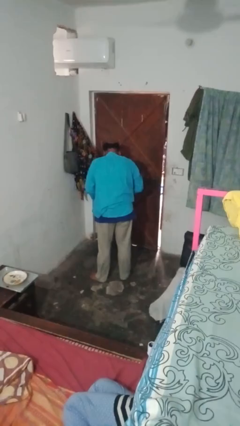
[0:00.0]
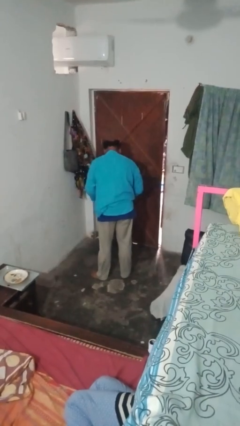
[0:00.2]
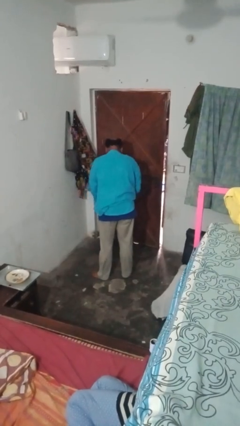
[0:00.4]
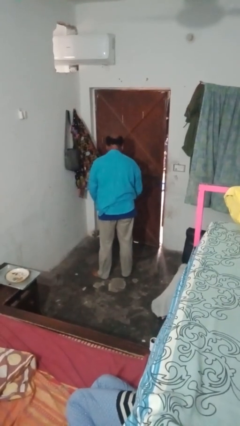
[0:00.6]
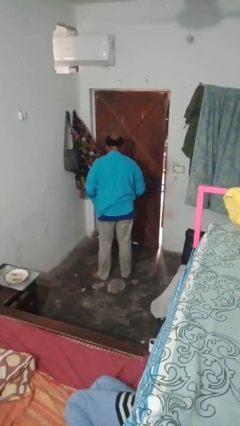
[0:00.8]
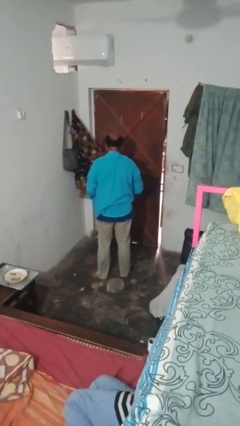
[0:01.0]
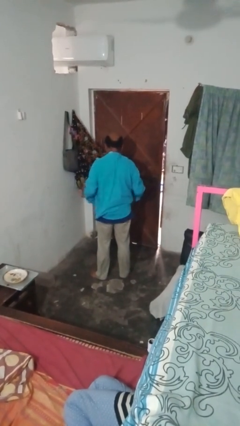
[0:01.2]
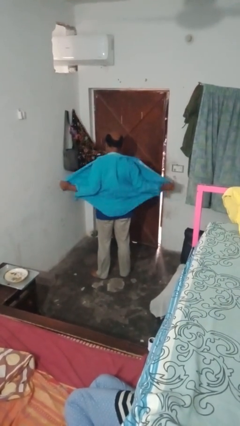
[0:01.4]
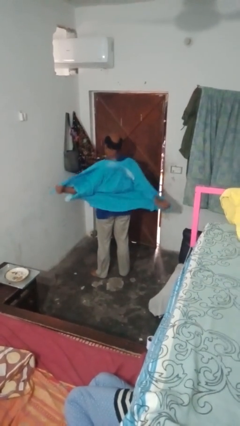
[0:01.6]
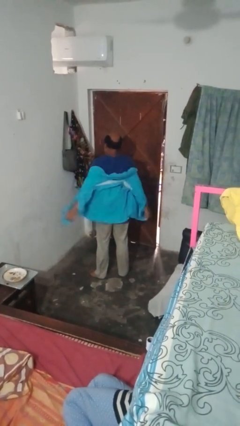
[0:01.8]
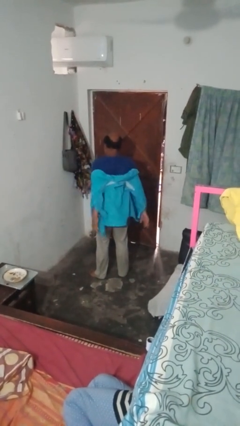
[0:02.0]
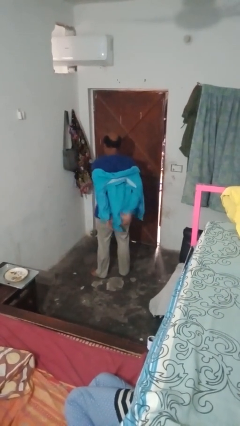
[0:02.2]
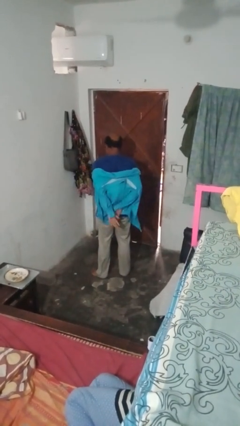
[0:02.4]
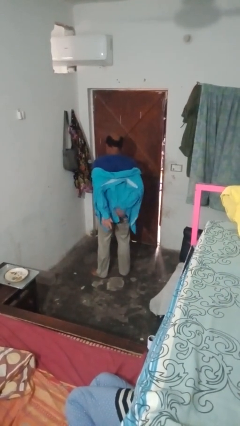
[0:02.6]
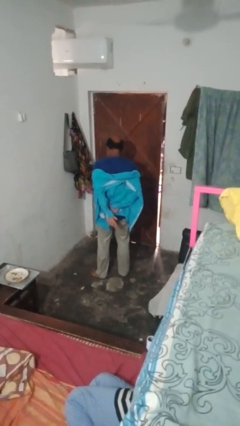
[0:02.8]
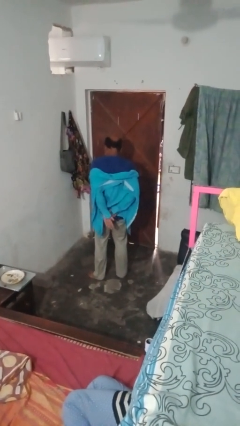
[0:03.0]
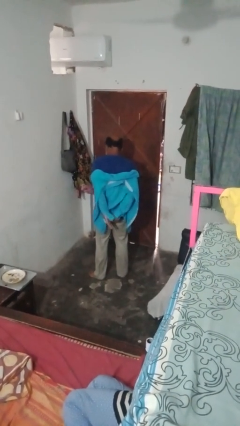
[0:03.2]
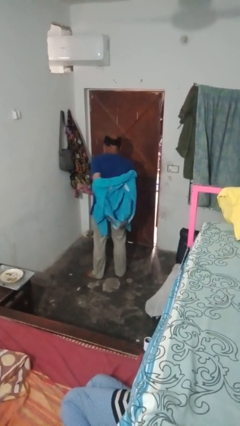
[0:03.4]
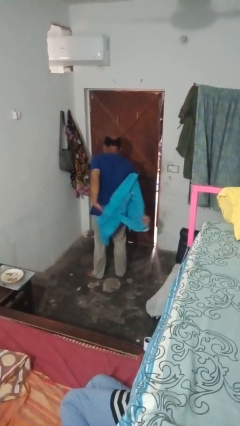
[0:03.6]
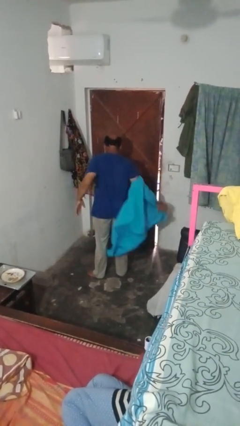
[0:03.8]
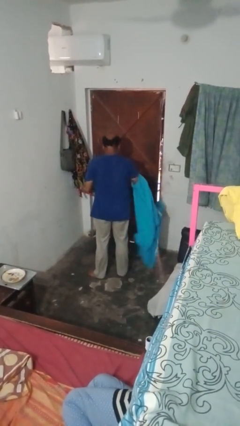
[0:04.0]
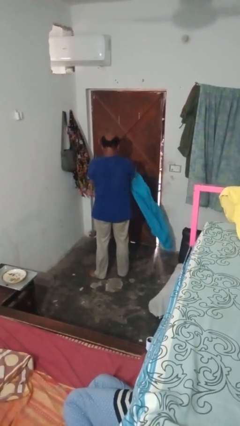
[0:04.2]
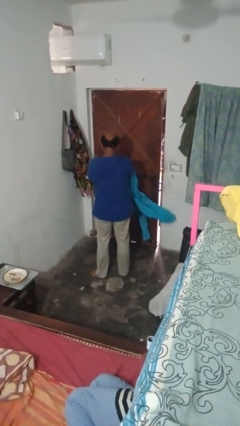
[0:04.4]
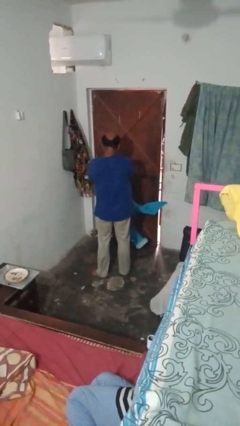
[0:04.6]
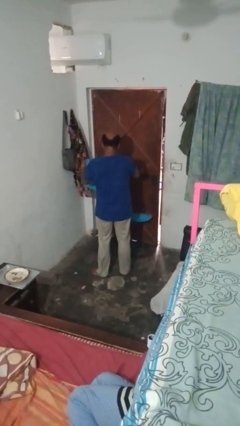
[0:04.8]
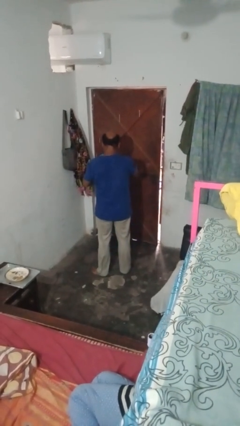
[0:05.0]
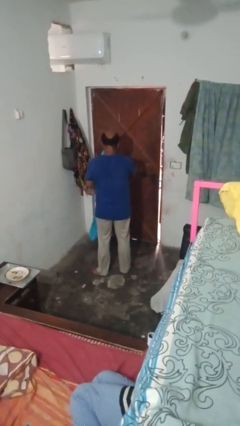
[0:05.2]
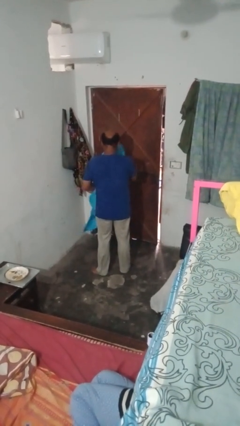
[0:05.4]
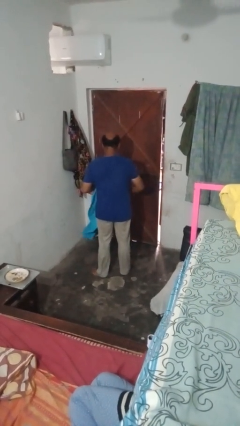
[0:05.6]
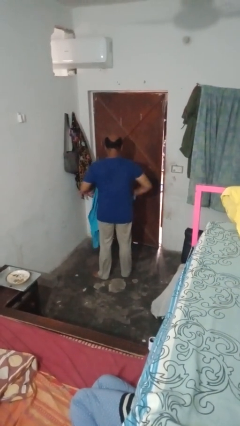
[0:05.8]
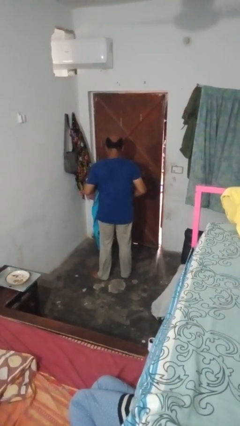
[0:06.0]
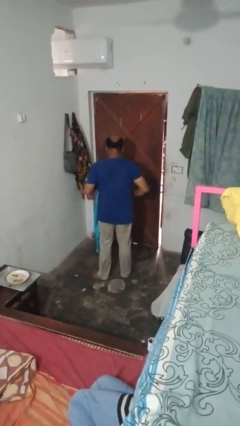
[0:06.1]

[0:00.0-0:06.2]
person takes off shirt

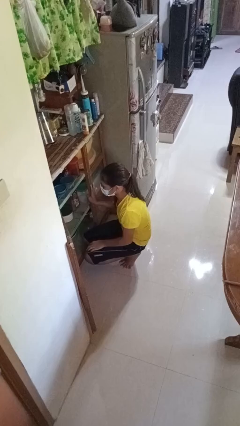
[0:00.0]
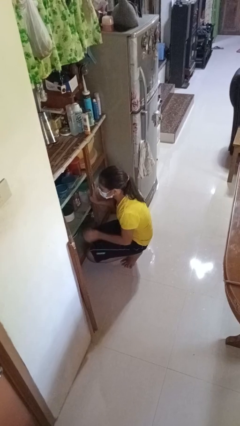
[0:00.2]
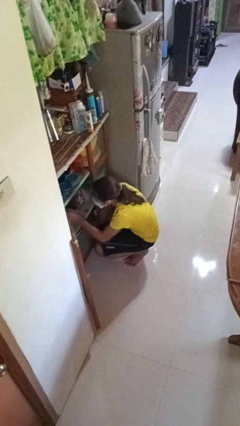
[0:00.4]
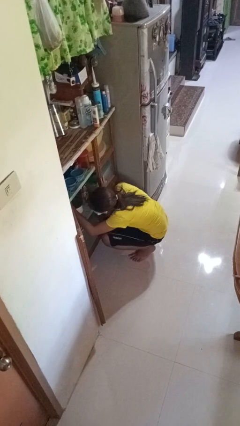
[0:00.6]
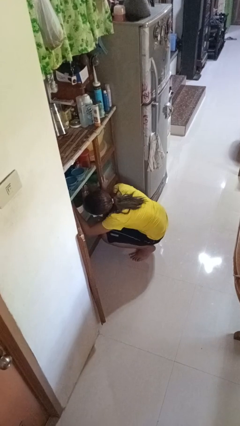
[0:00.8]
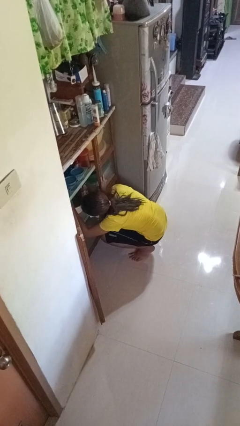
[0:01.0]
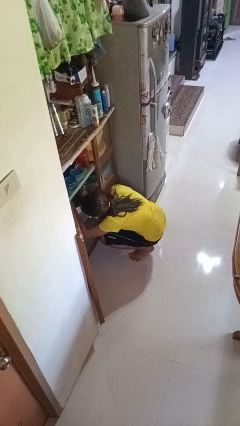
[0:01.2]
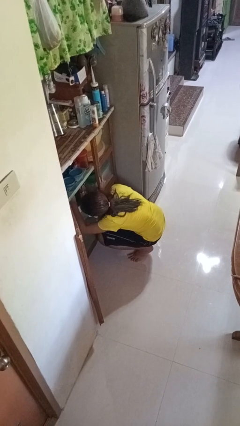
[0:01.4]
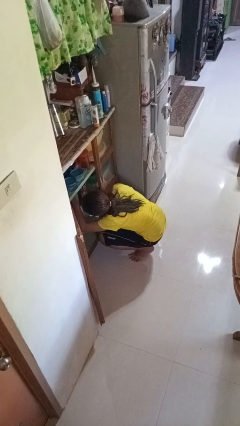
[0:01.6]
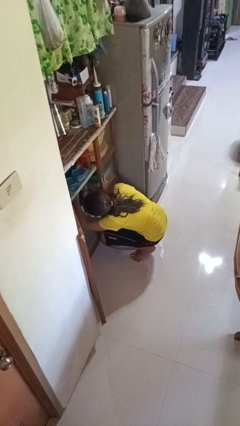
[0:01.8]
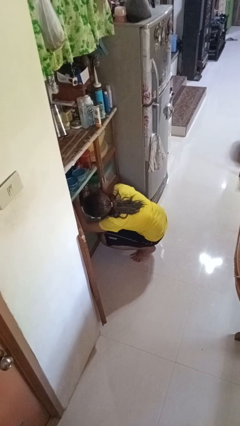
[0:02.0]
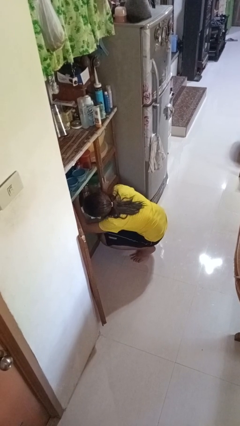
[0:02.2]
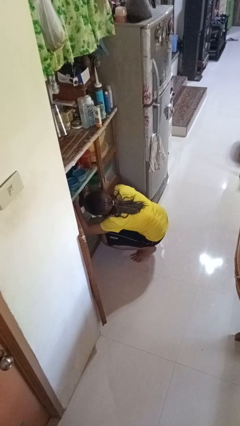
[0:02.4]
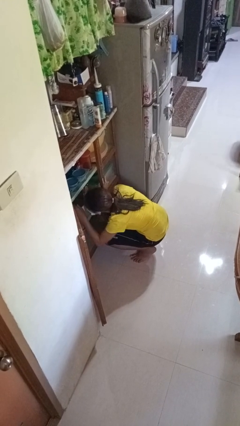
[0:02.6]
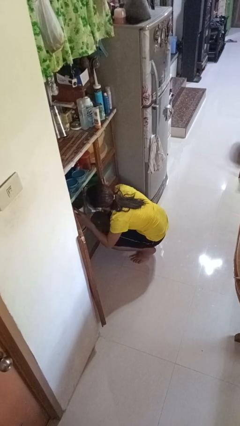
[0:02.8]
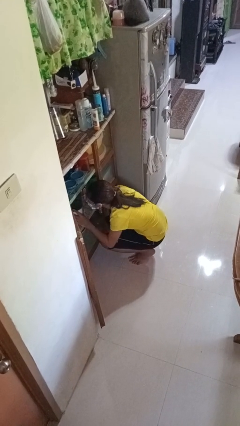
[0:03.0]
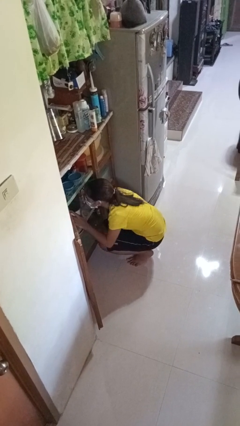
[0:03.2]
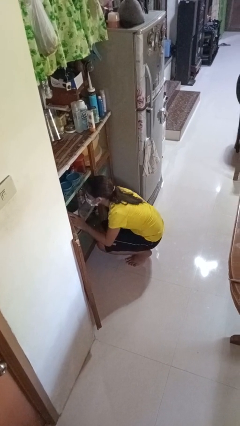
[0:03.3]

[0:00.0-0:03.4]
person searches in cabinet

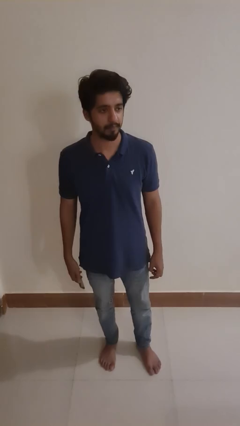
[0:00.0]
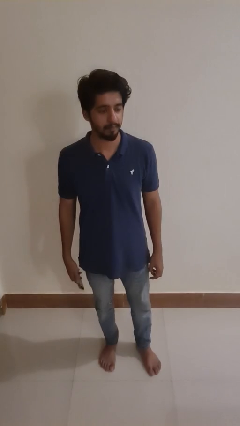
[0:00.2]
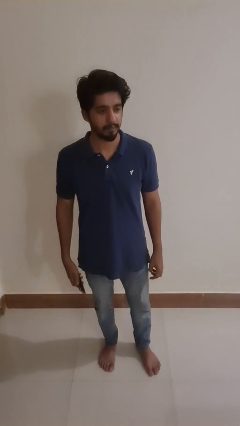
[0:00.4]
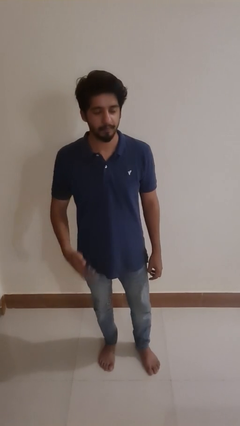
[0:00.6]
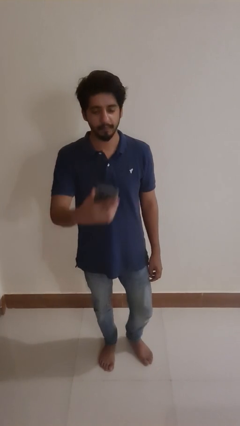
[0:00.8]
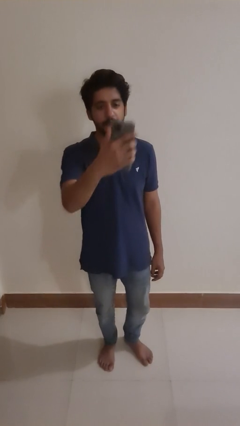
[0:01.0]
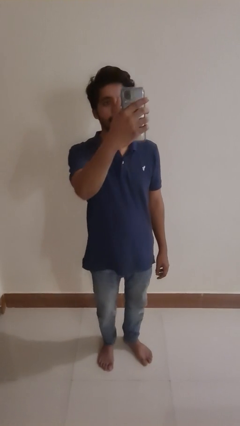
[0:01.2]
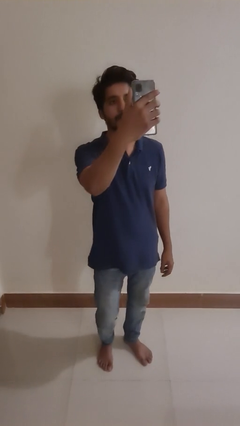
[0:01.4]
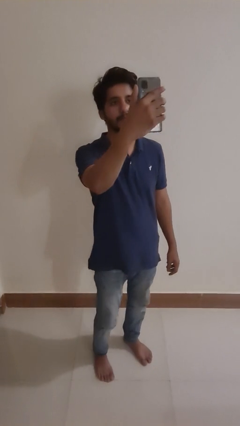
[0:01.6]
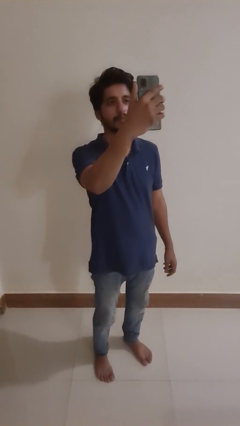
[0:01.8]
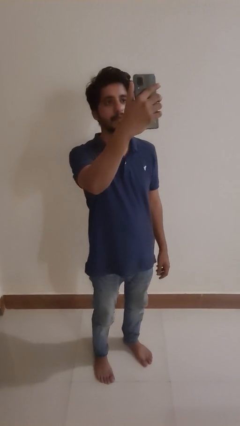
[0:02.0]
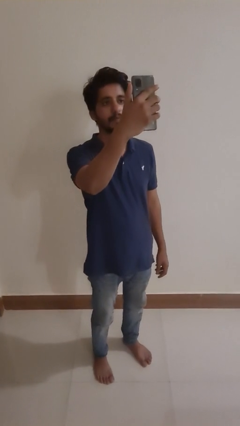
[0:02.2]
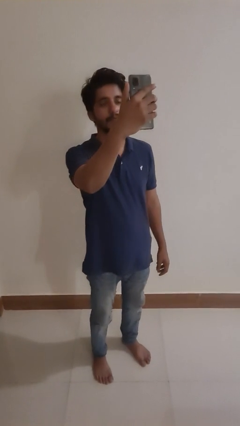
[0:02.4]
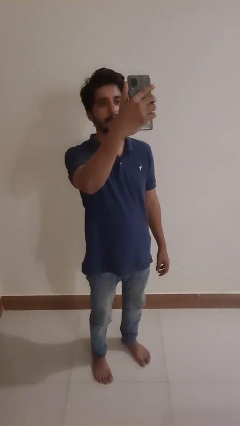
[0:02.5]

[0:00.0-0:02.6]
person takes selfie

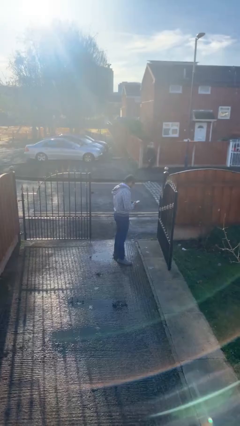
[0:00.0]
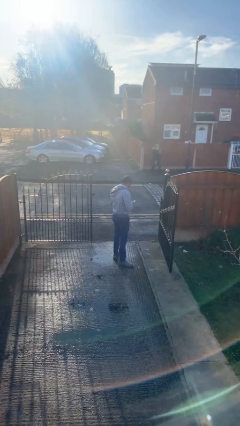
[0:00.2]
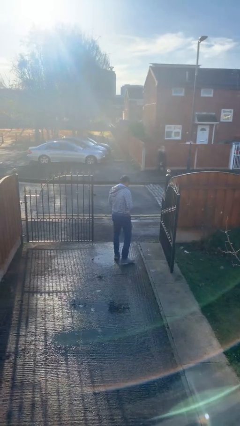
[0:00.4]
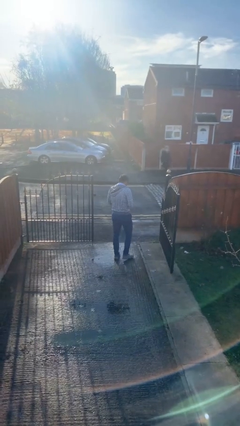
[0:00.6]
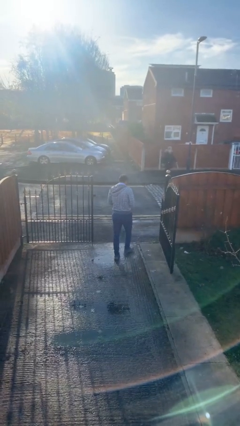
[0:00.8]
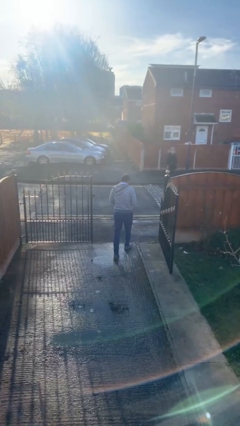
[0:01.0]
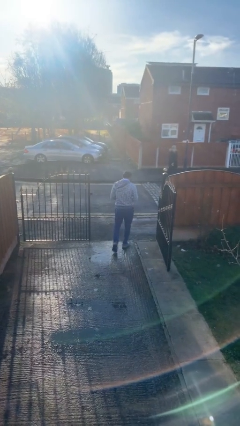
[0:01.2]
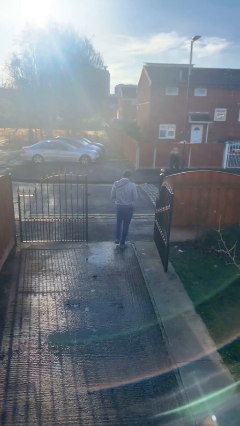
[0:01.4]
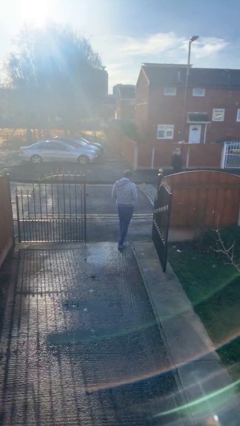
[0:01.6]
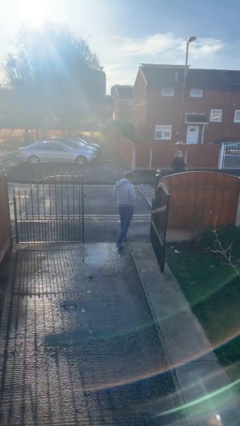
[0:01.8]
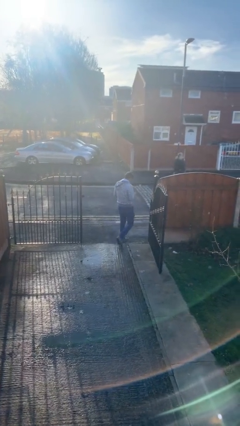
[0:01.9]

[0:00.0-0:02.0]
person exits scene through structure

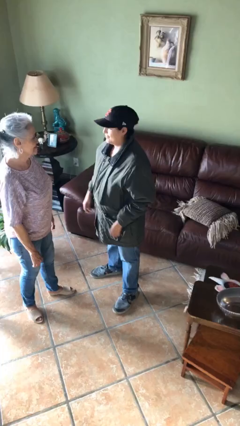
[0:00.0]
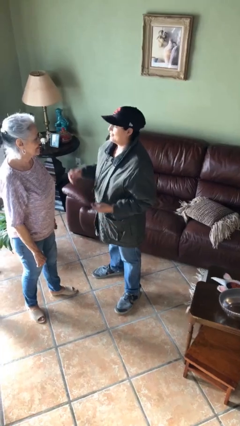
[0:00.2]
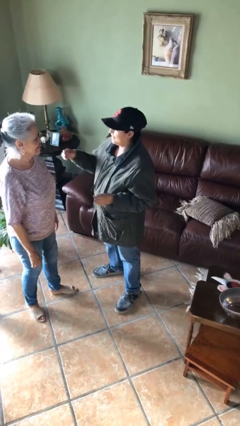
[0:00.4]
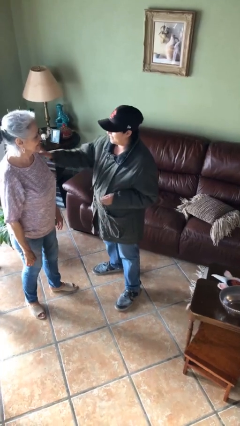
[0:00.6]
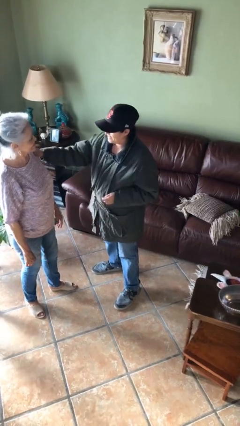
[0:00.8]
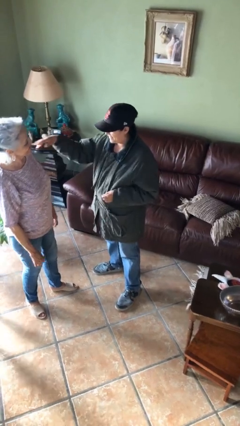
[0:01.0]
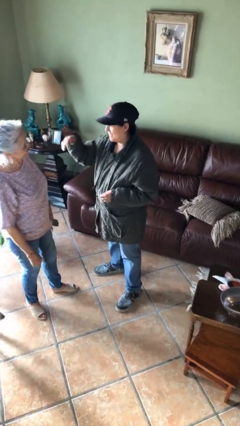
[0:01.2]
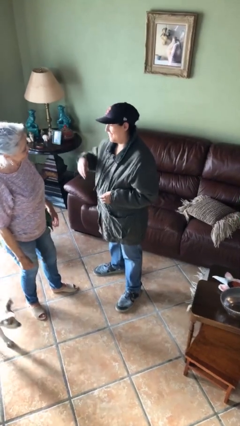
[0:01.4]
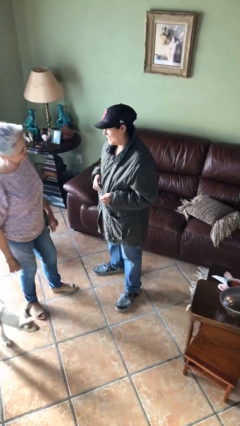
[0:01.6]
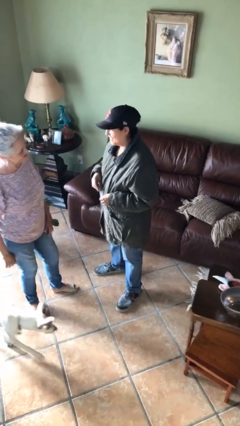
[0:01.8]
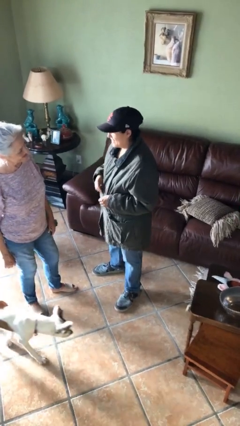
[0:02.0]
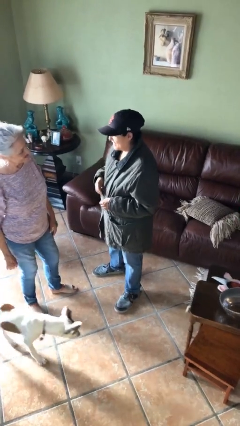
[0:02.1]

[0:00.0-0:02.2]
person shoves person

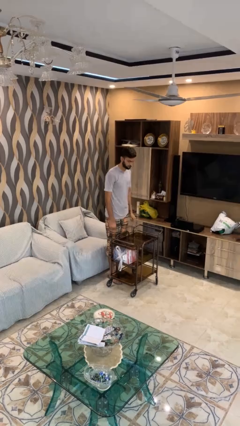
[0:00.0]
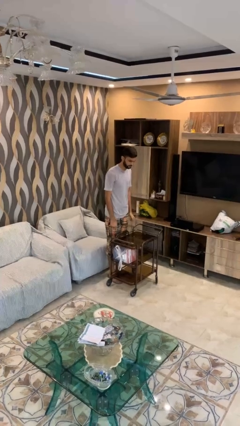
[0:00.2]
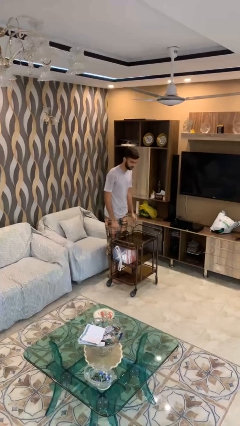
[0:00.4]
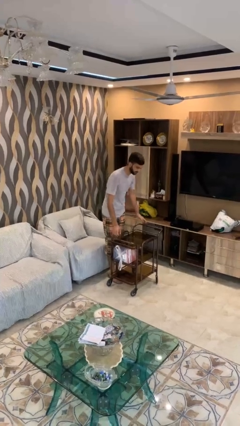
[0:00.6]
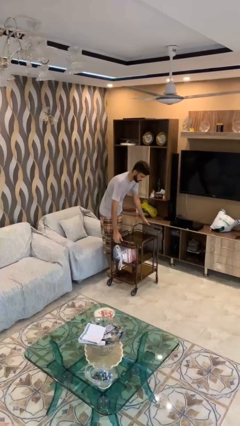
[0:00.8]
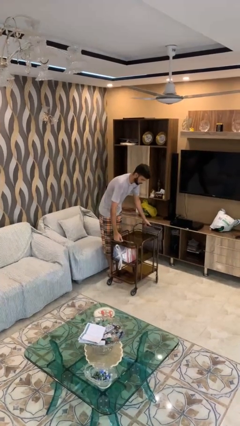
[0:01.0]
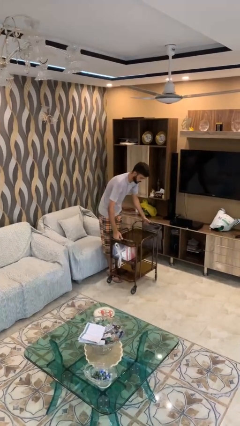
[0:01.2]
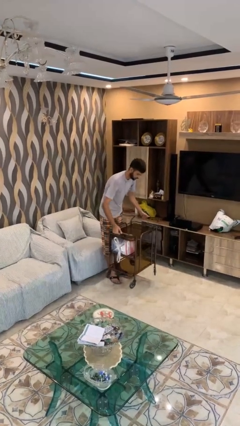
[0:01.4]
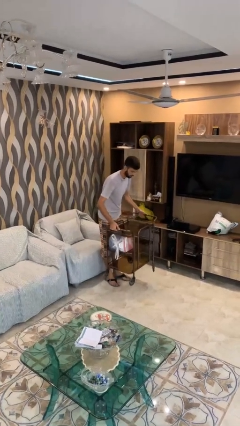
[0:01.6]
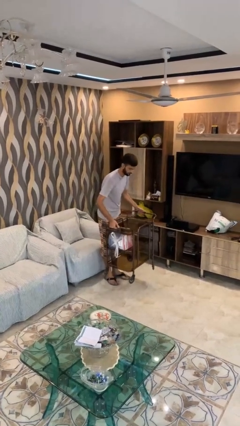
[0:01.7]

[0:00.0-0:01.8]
person picks up object from floor
